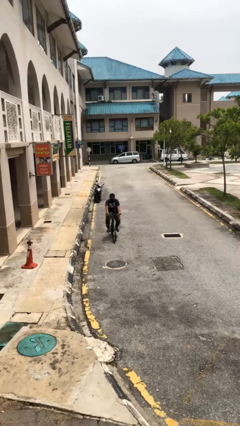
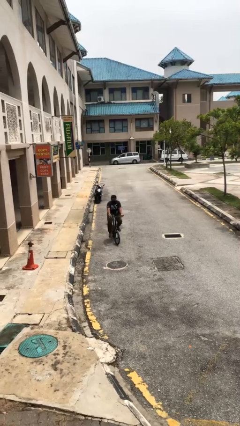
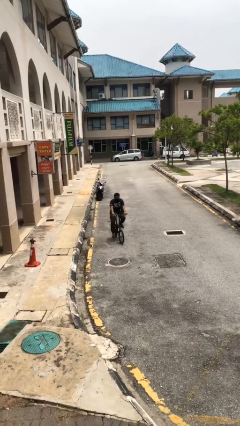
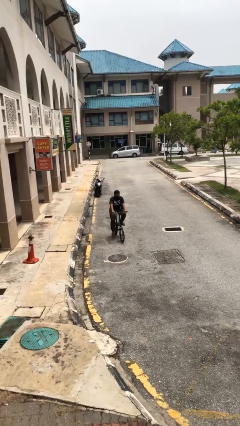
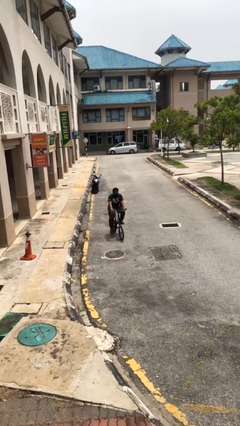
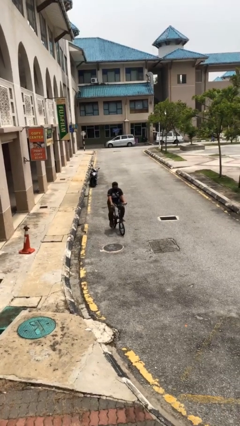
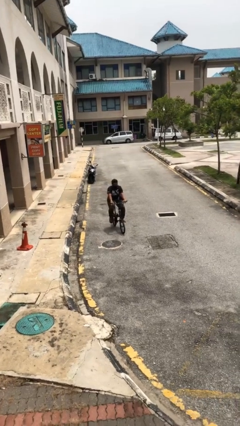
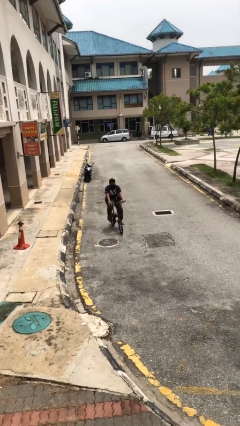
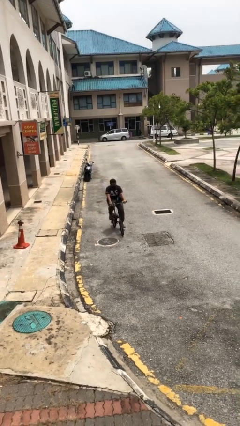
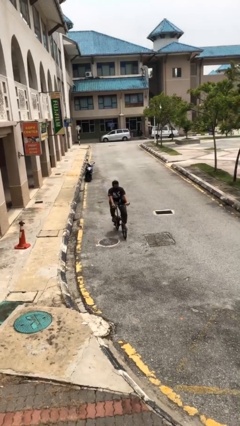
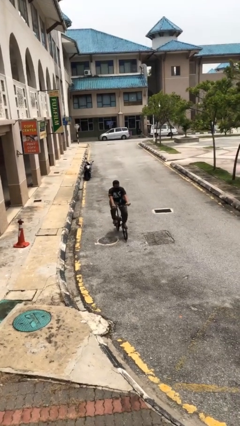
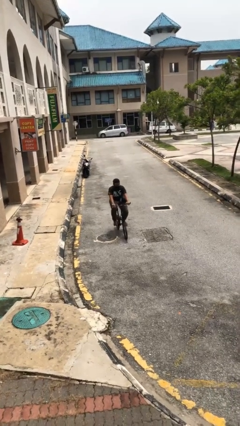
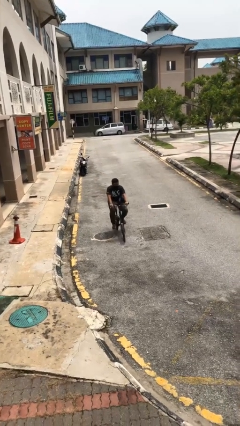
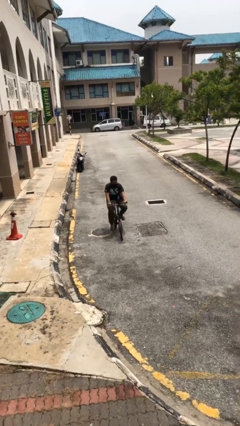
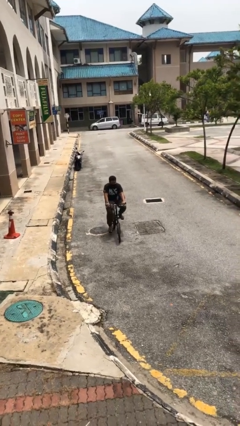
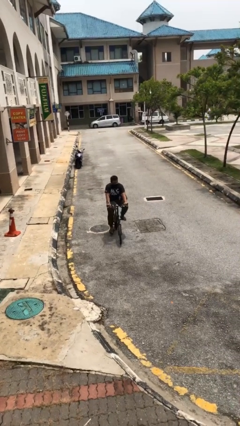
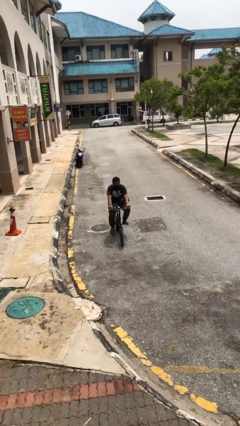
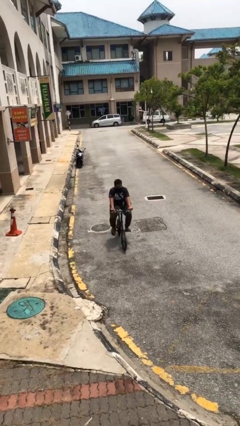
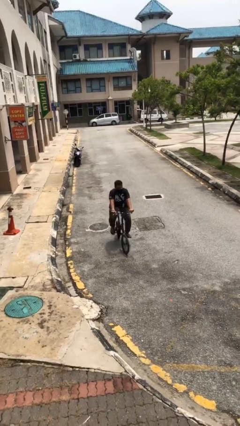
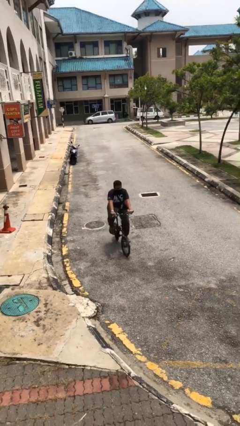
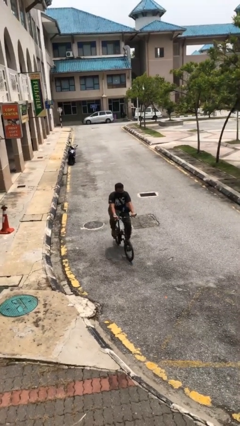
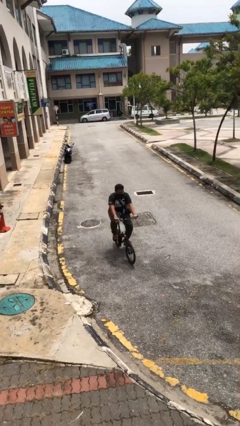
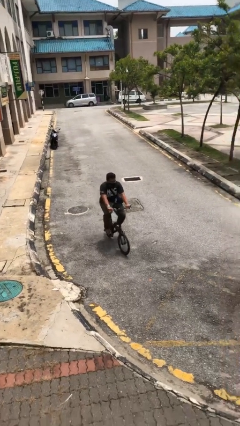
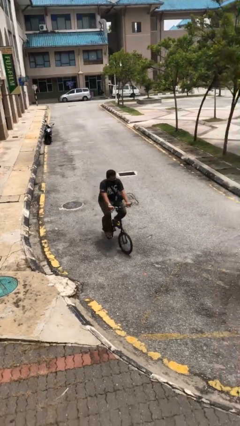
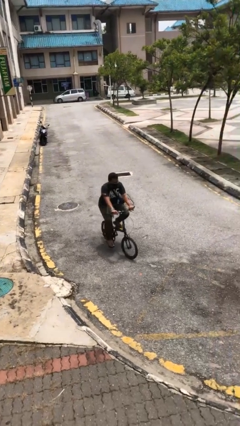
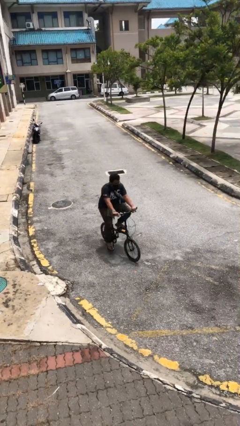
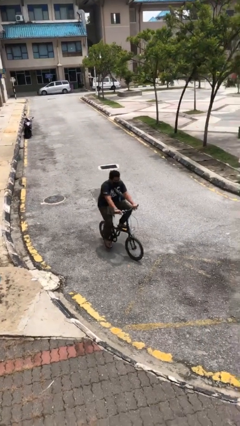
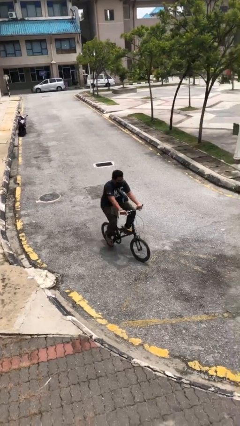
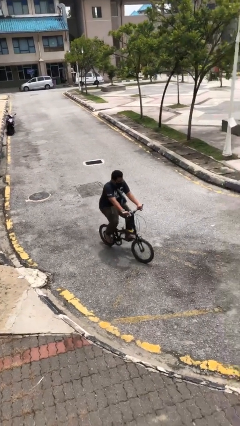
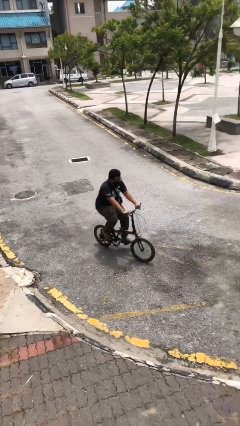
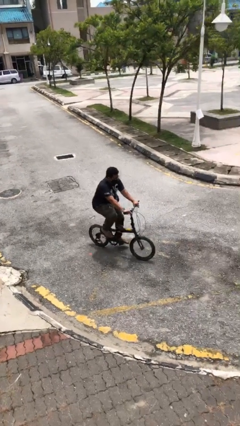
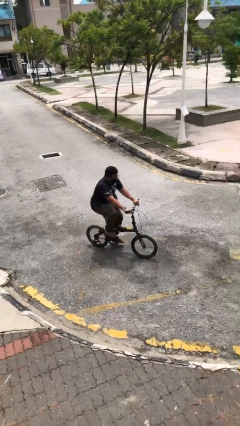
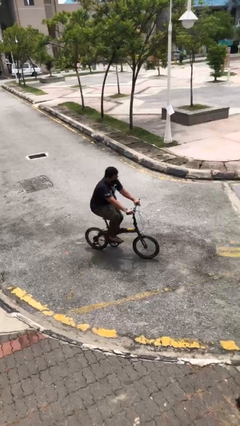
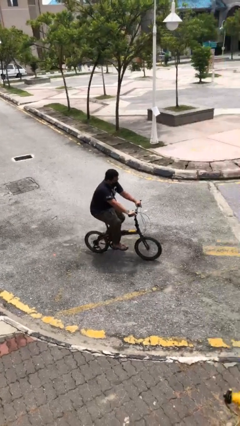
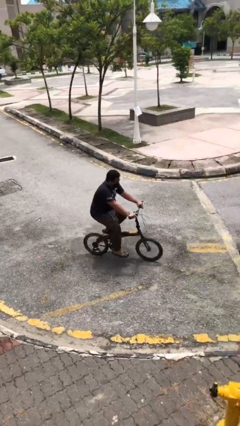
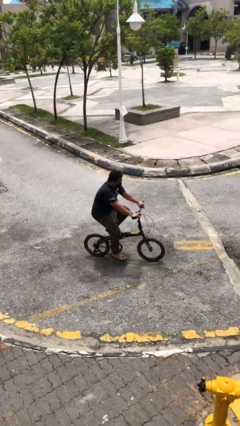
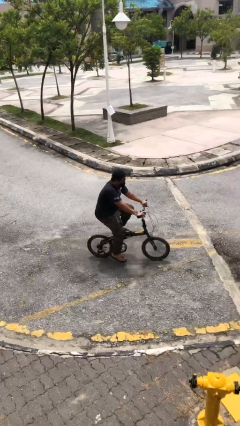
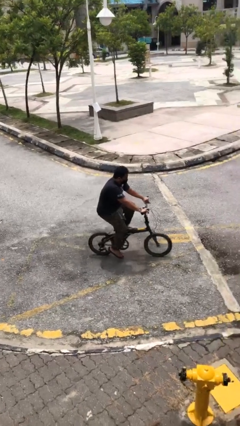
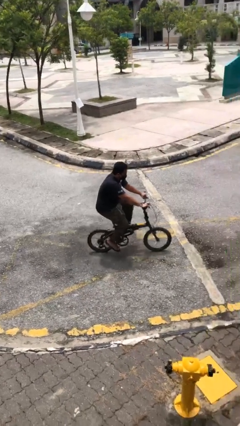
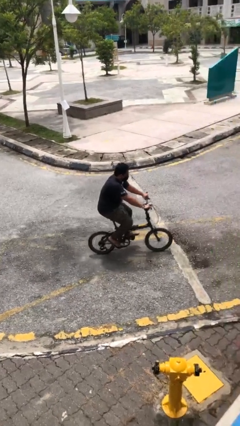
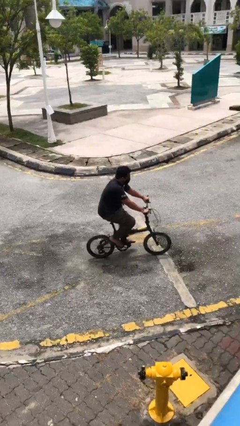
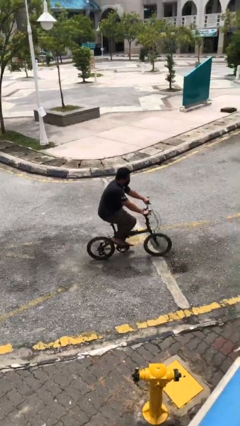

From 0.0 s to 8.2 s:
person rides bicycle

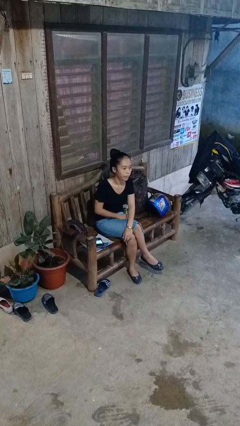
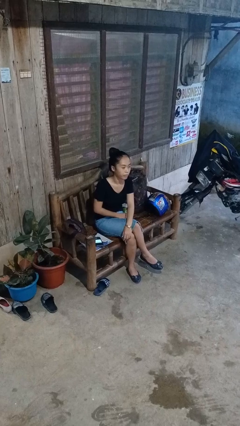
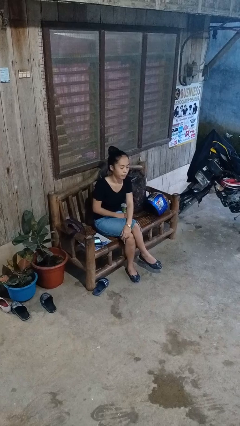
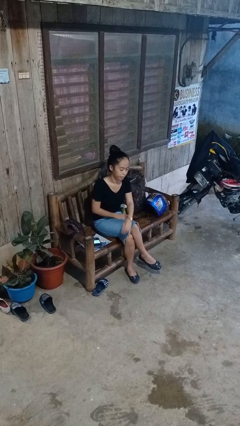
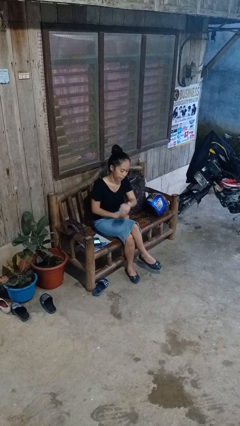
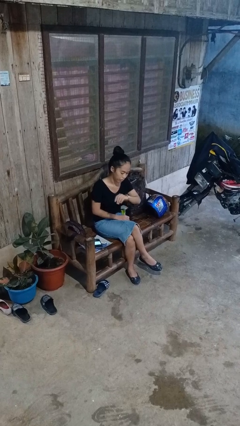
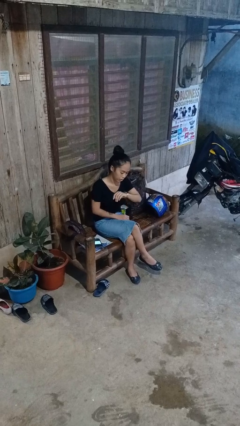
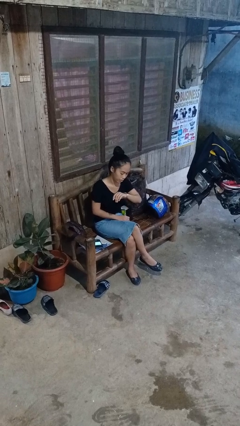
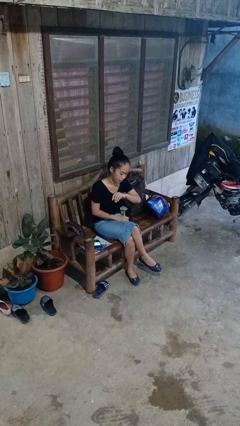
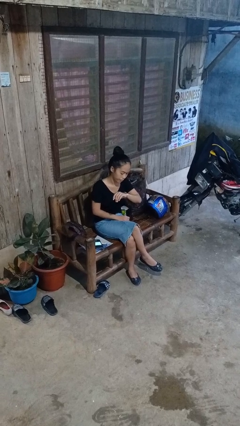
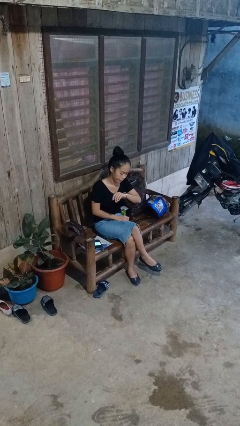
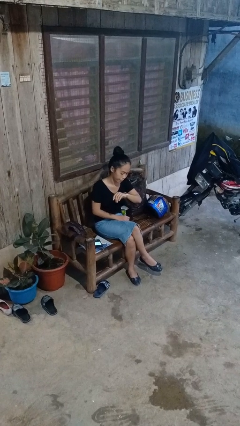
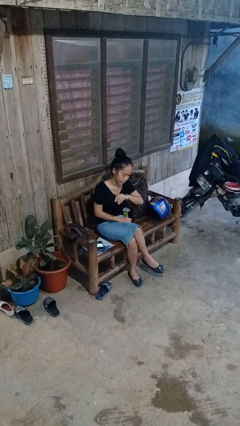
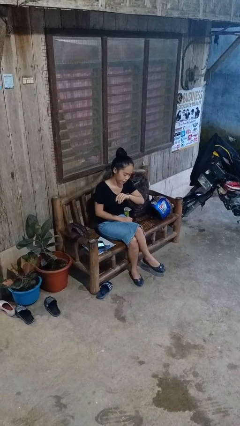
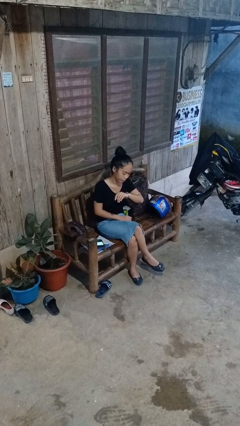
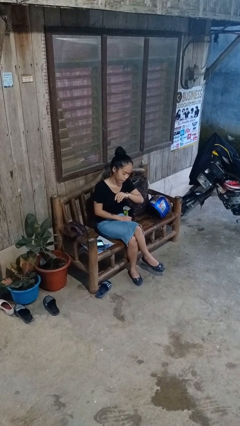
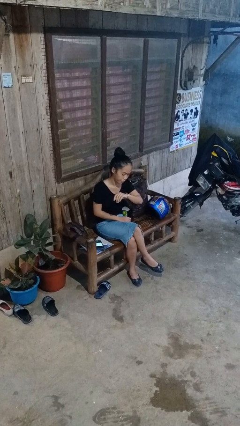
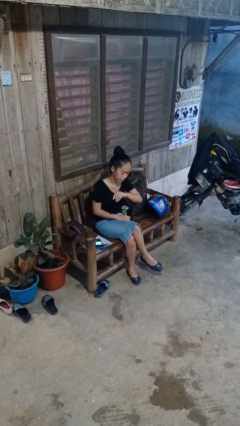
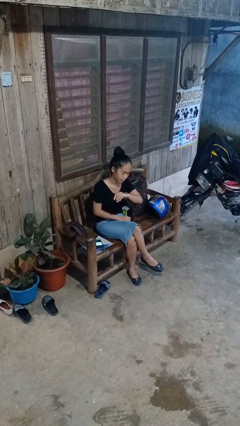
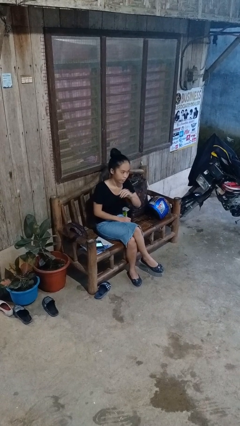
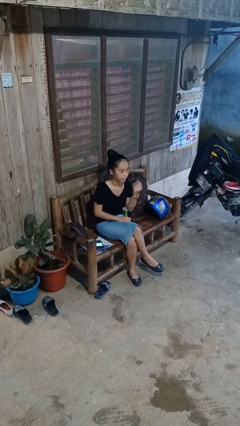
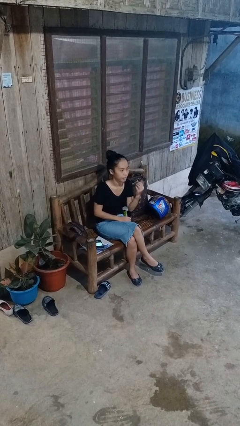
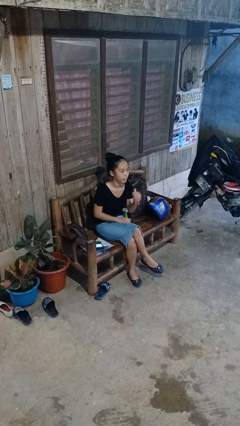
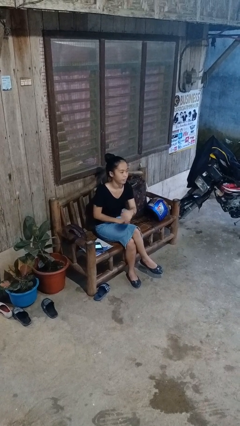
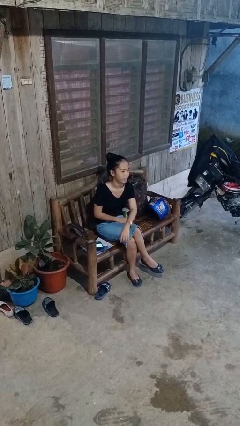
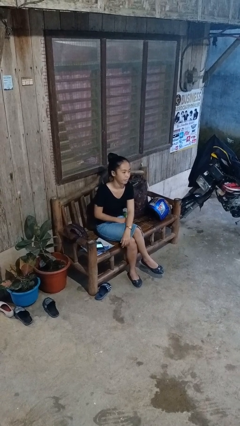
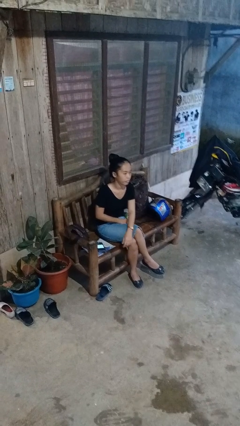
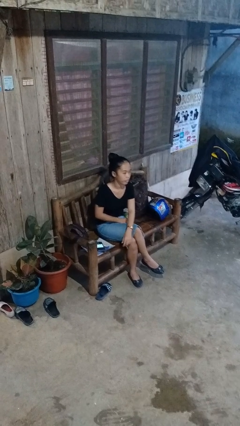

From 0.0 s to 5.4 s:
person looks at wristwatch

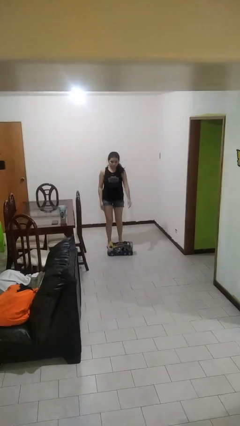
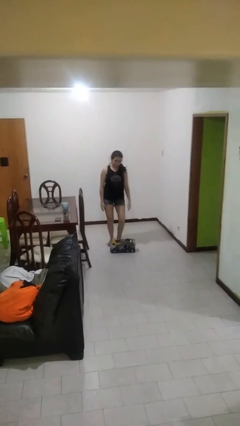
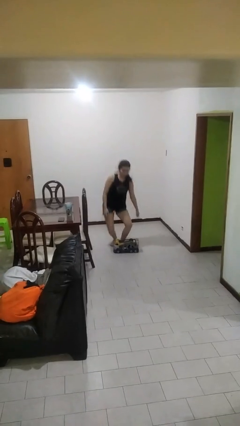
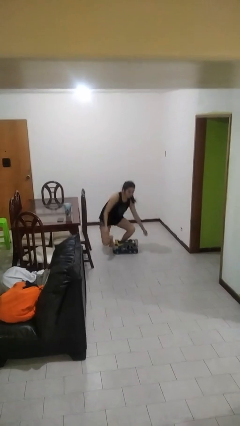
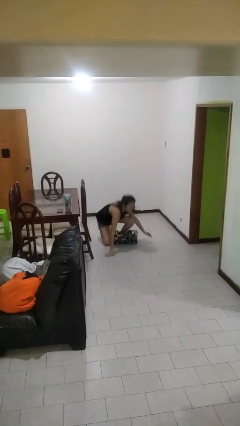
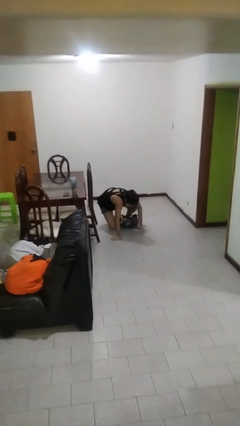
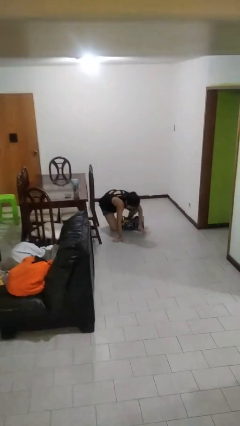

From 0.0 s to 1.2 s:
person trips on object on floor

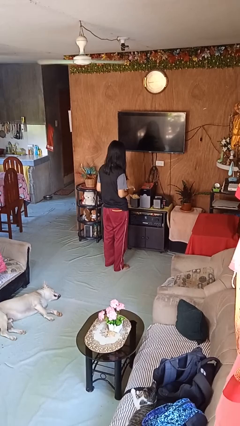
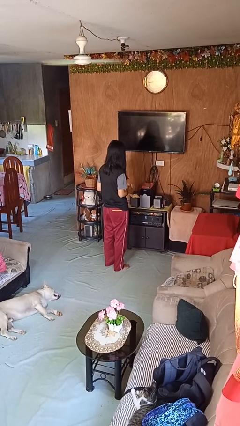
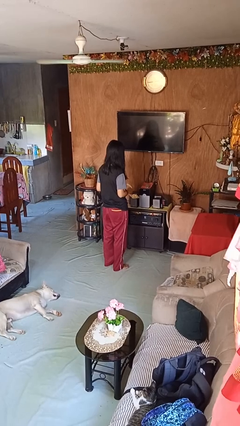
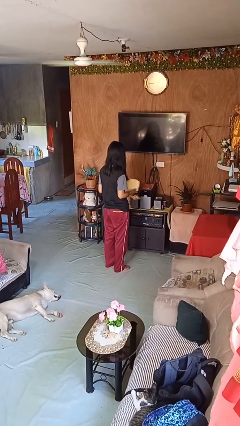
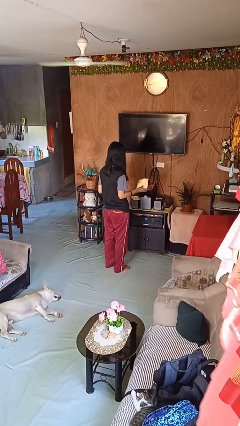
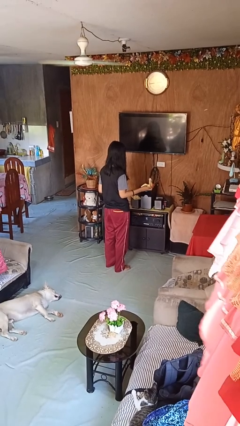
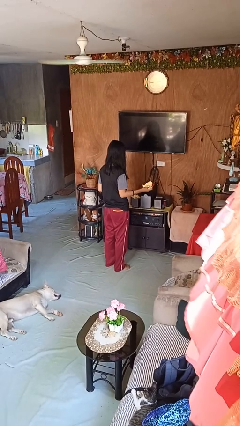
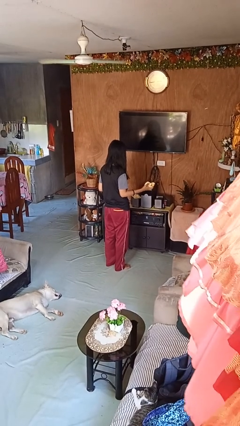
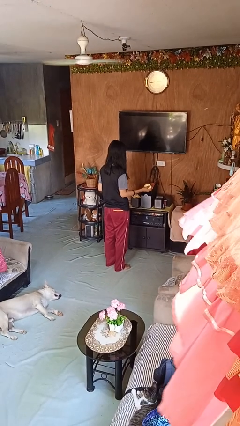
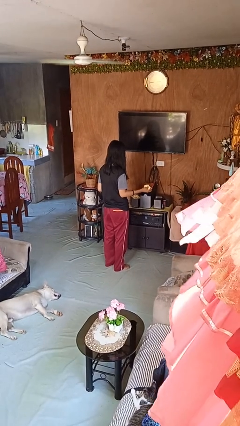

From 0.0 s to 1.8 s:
person crumples paper

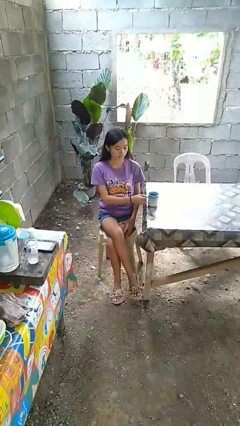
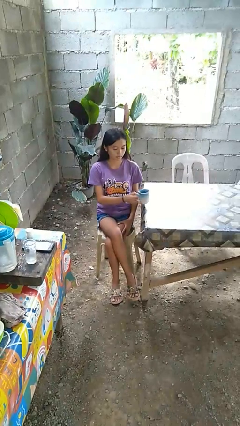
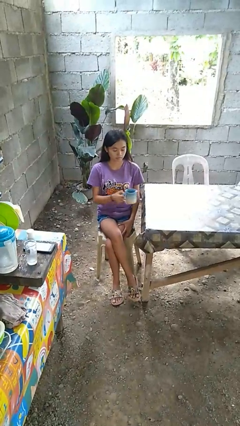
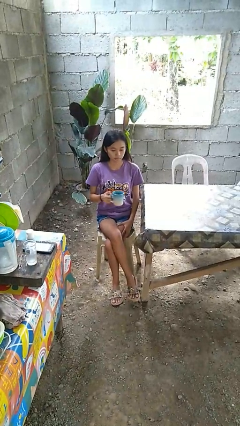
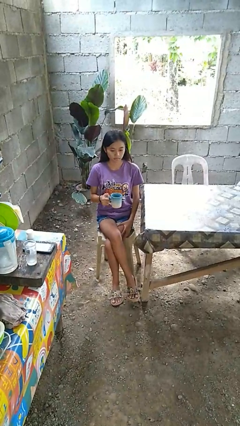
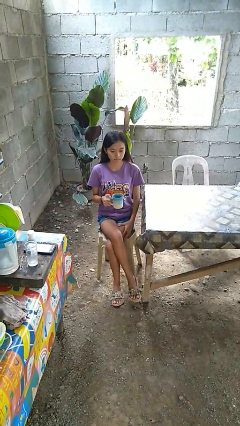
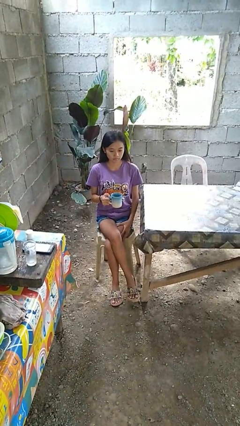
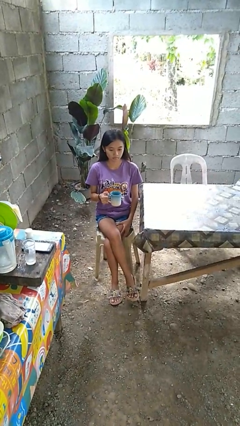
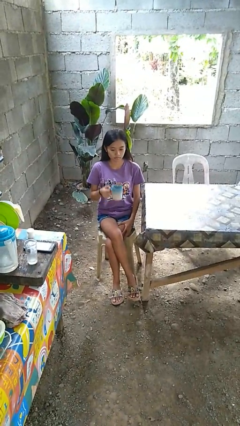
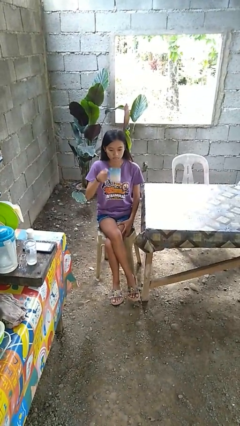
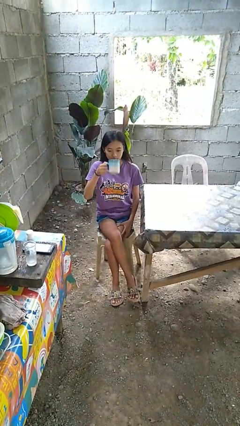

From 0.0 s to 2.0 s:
person picks up object from table
